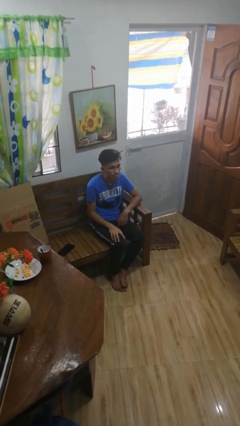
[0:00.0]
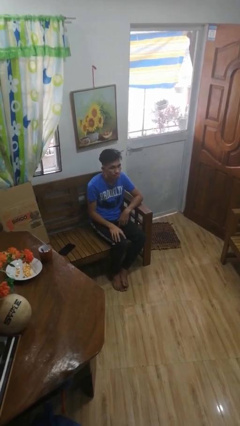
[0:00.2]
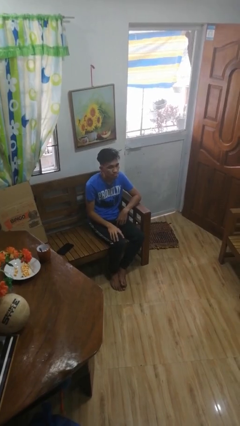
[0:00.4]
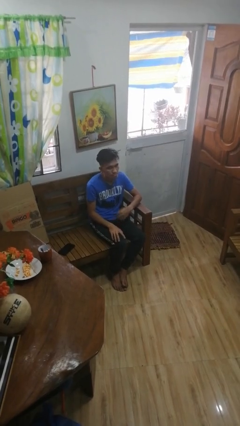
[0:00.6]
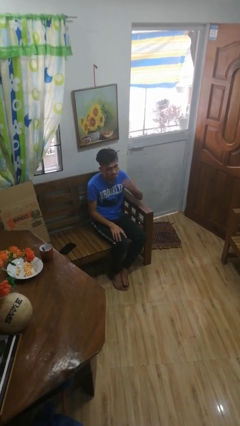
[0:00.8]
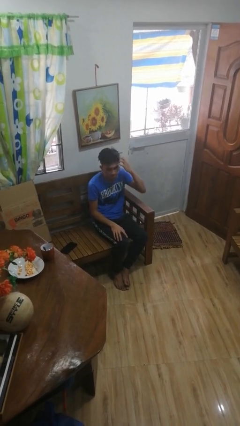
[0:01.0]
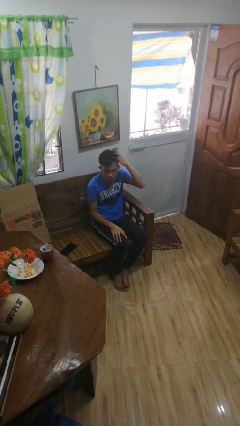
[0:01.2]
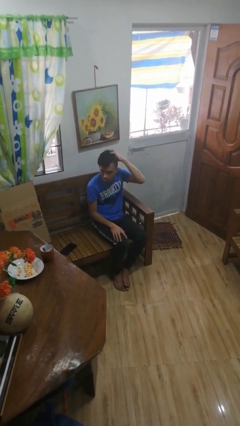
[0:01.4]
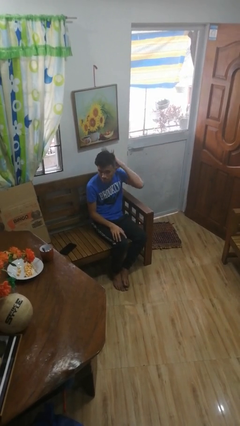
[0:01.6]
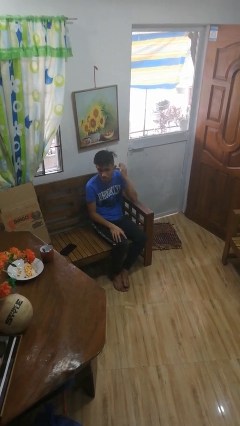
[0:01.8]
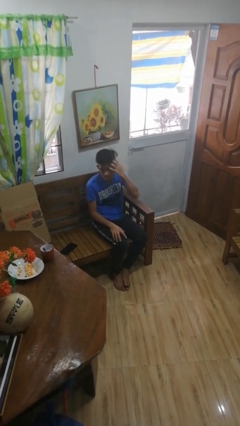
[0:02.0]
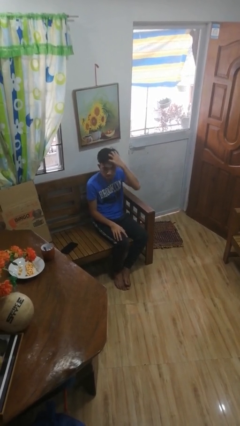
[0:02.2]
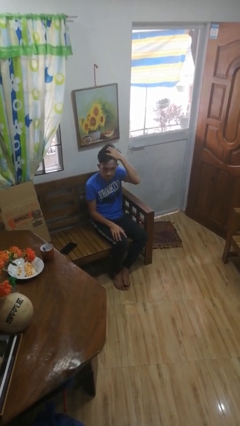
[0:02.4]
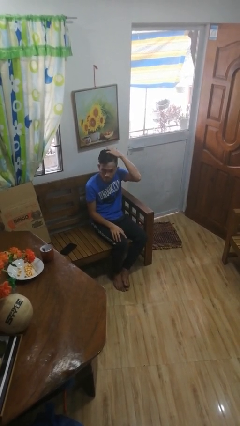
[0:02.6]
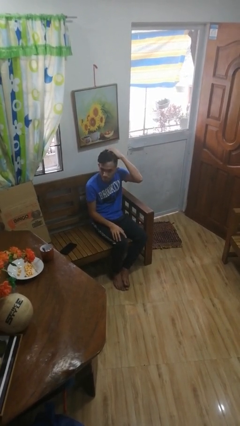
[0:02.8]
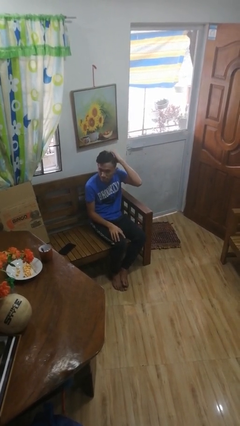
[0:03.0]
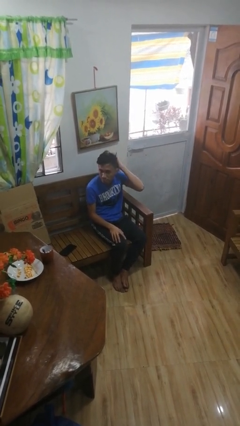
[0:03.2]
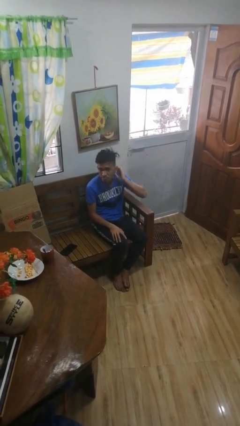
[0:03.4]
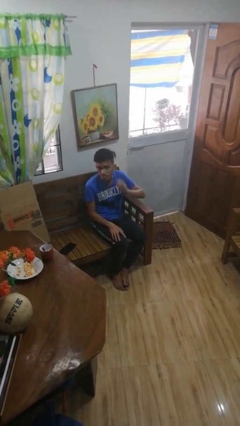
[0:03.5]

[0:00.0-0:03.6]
person strokes hair

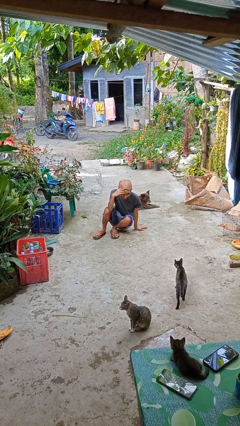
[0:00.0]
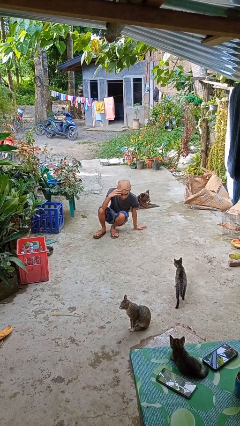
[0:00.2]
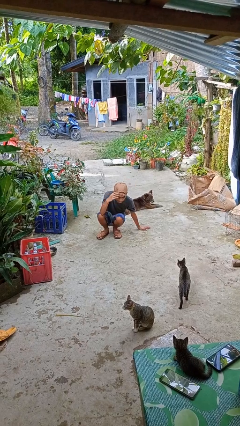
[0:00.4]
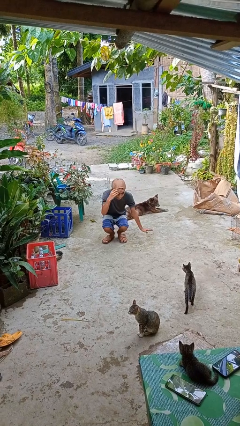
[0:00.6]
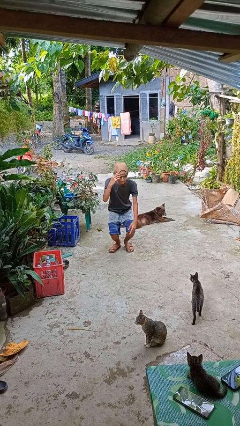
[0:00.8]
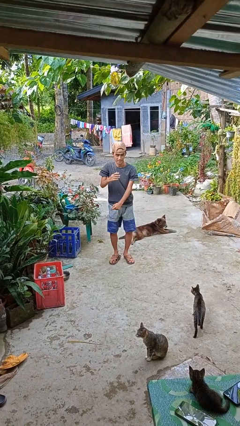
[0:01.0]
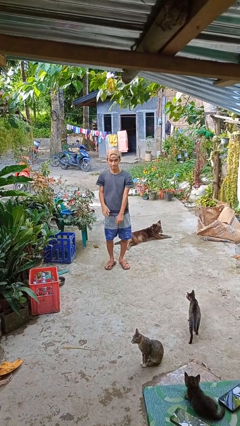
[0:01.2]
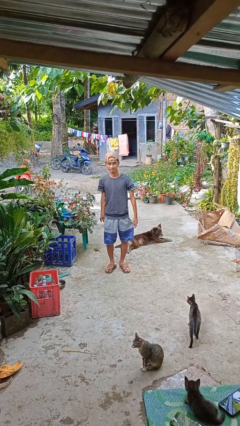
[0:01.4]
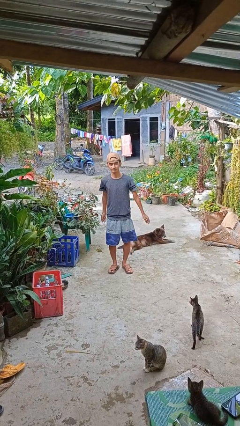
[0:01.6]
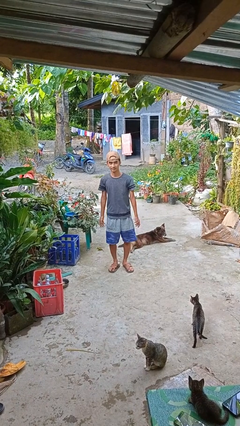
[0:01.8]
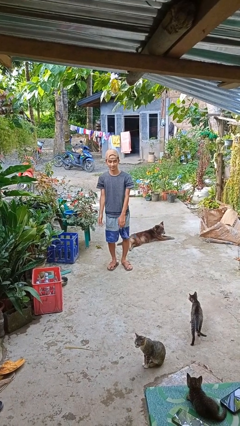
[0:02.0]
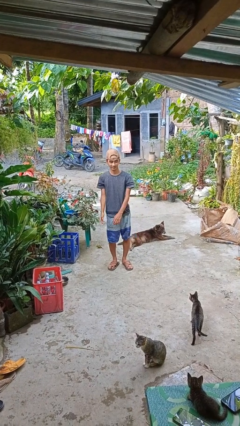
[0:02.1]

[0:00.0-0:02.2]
person stands up from floor

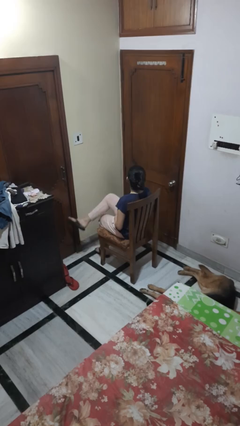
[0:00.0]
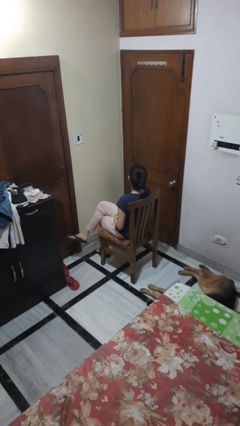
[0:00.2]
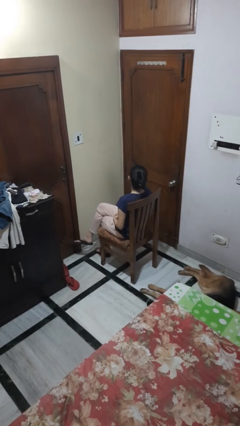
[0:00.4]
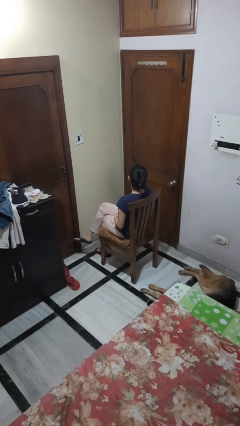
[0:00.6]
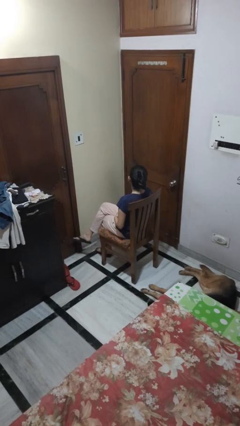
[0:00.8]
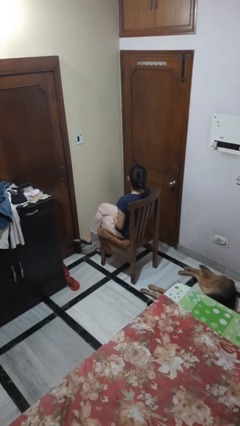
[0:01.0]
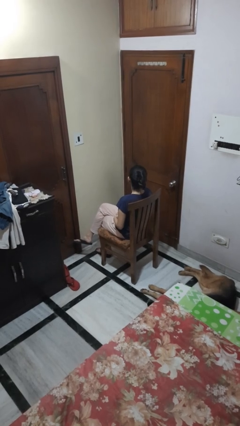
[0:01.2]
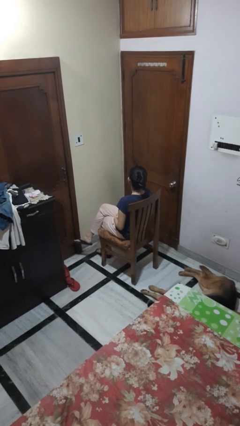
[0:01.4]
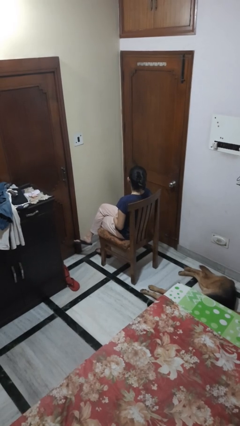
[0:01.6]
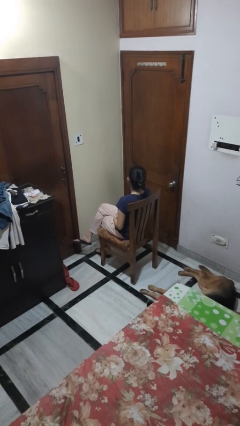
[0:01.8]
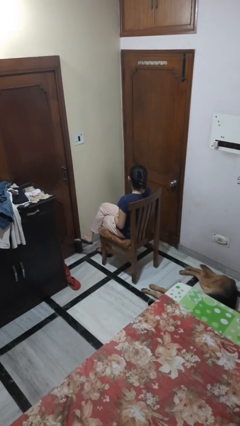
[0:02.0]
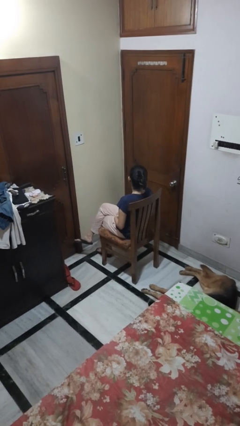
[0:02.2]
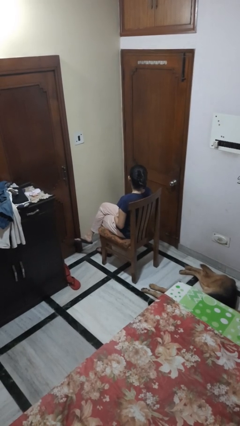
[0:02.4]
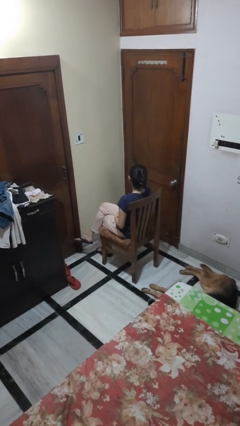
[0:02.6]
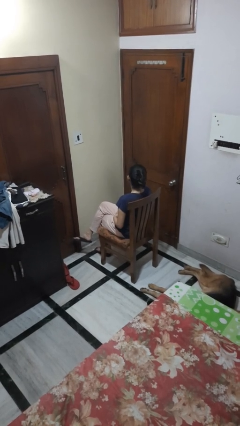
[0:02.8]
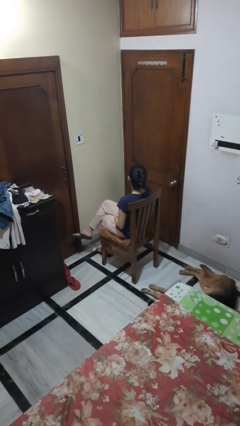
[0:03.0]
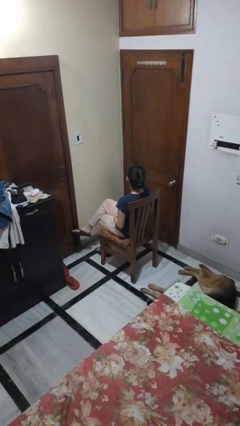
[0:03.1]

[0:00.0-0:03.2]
person crosses legs

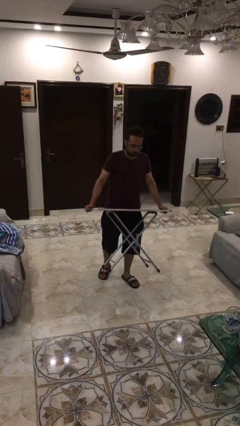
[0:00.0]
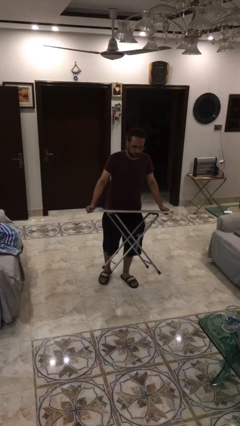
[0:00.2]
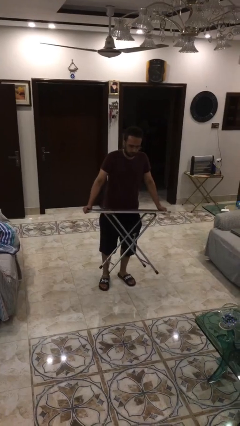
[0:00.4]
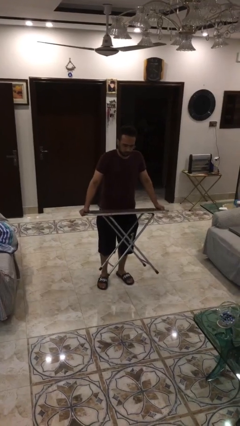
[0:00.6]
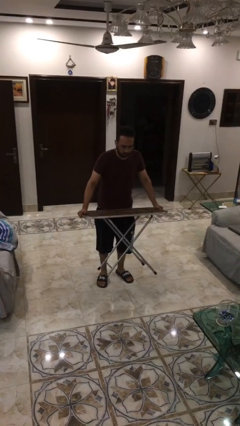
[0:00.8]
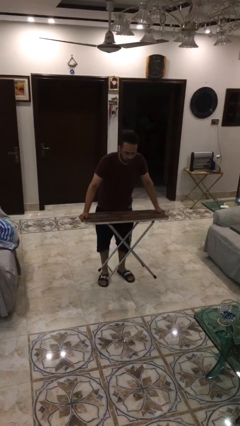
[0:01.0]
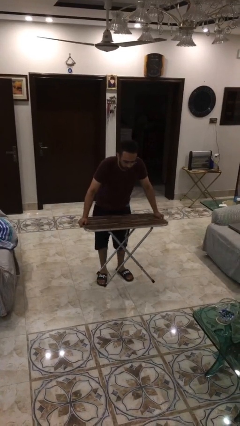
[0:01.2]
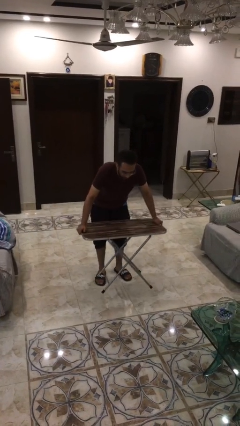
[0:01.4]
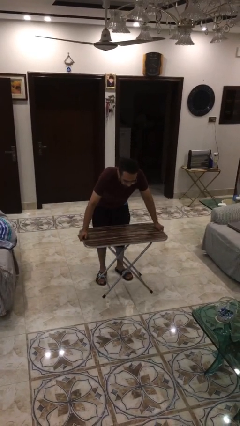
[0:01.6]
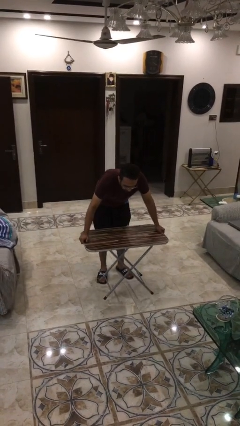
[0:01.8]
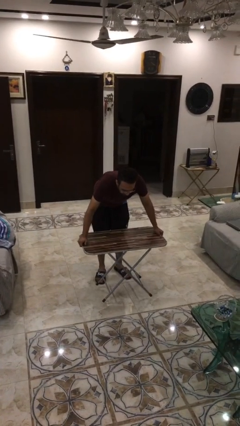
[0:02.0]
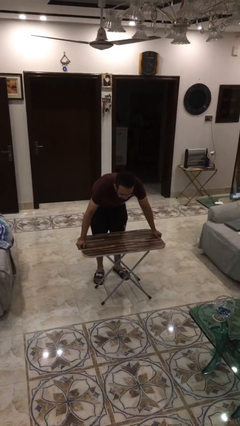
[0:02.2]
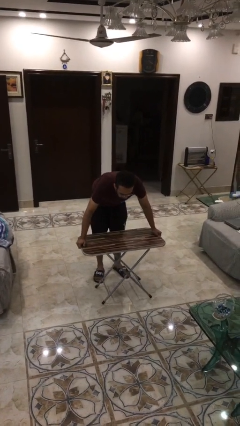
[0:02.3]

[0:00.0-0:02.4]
person puts down object on floor

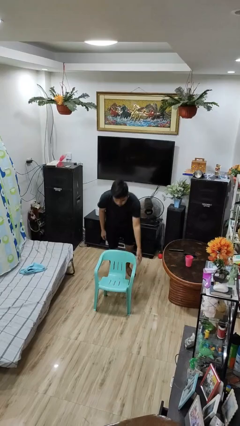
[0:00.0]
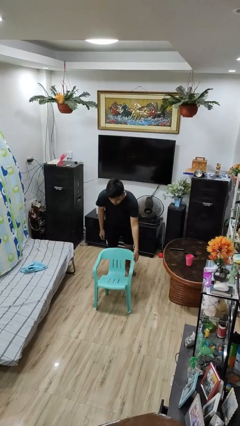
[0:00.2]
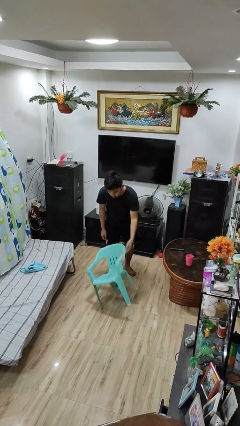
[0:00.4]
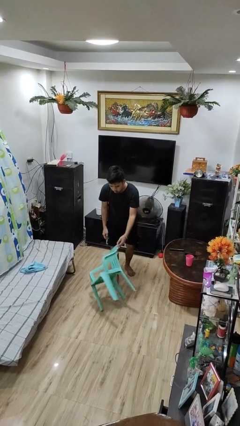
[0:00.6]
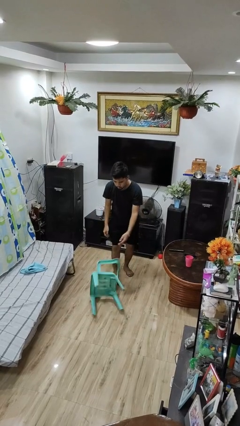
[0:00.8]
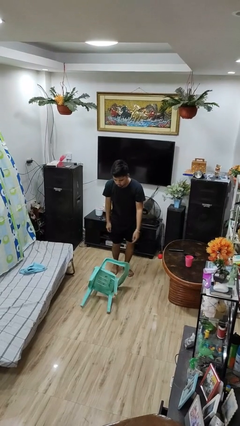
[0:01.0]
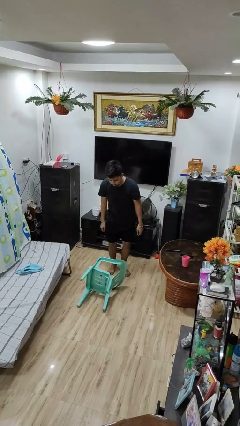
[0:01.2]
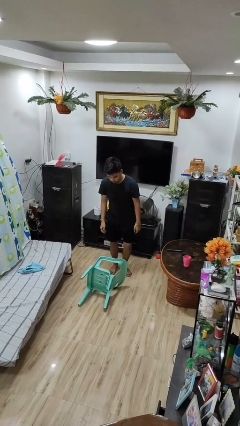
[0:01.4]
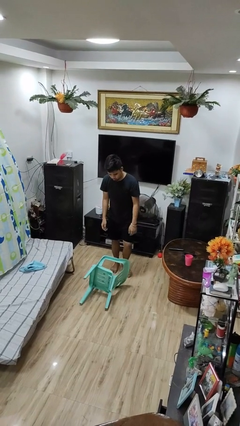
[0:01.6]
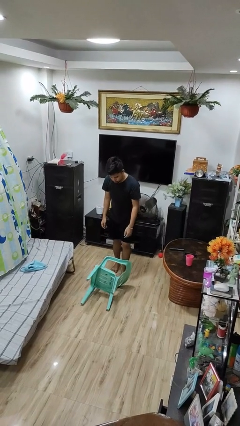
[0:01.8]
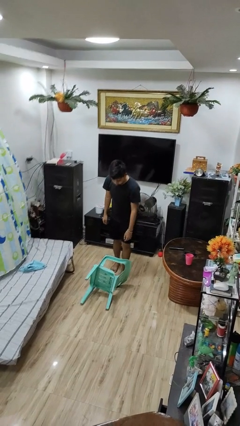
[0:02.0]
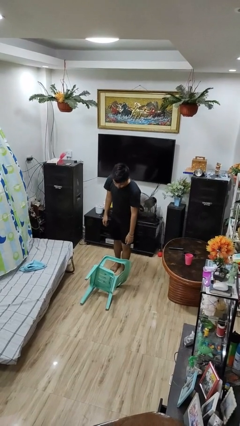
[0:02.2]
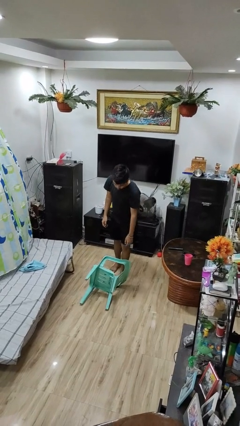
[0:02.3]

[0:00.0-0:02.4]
person knocks over furniture

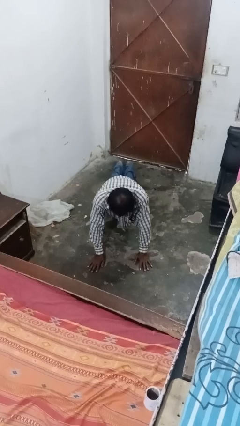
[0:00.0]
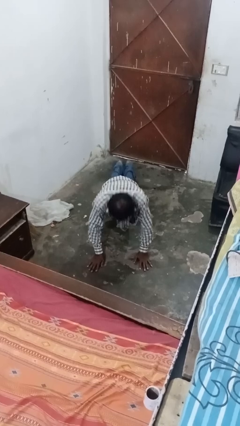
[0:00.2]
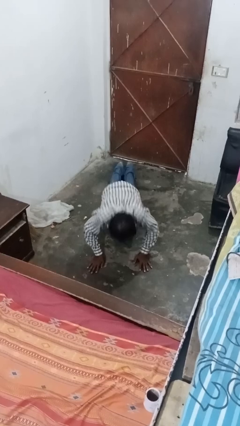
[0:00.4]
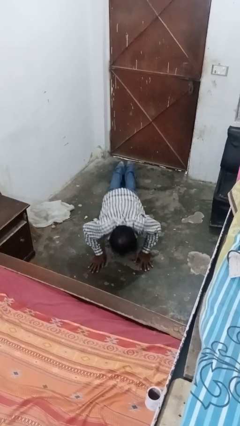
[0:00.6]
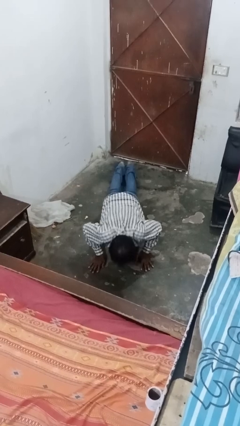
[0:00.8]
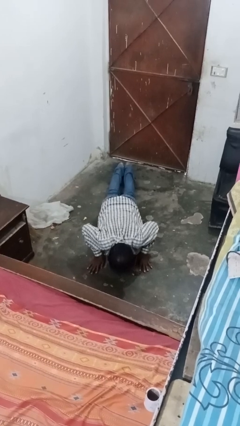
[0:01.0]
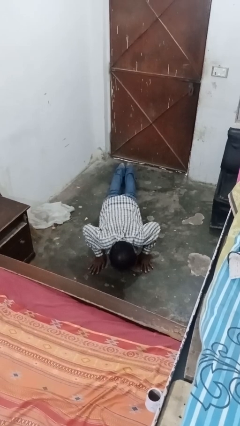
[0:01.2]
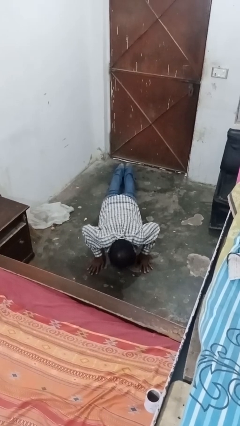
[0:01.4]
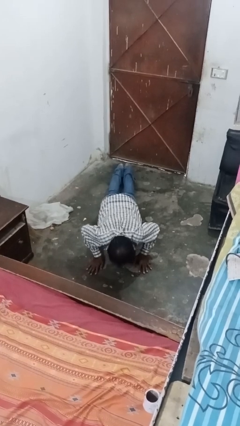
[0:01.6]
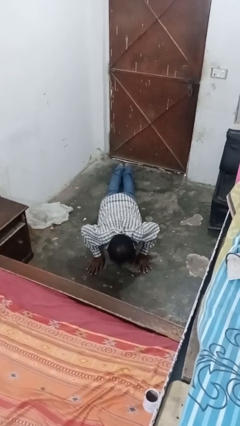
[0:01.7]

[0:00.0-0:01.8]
person exercises with pushup

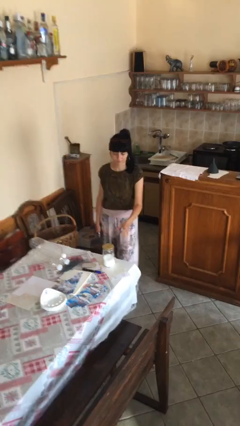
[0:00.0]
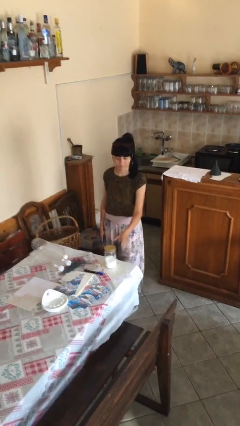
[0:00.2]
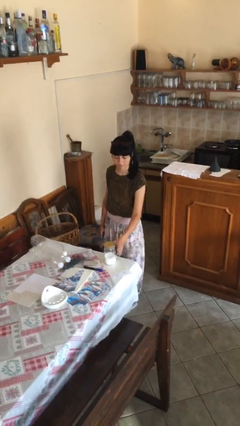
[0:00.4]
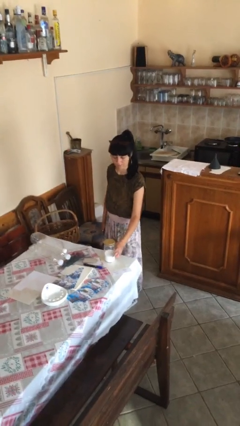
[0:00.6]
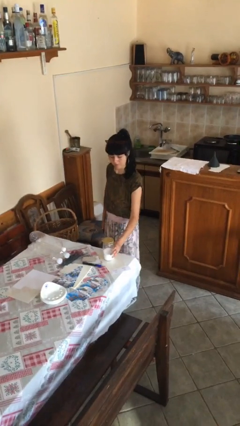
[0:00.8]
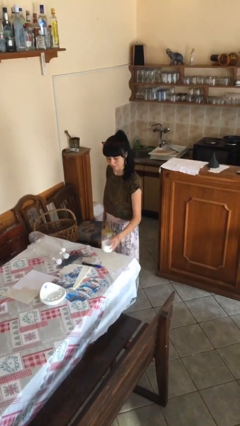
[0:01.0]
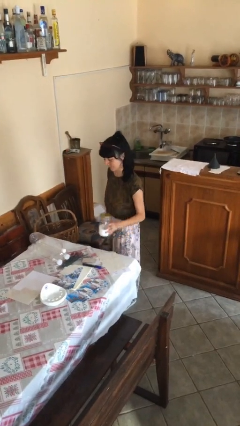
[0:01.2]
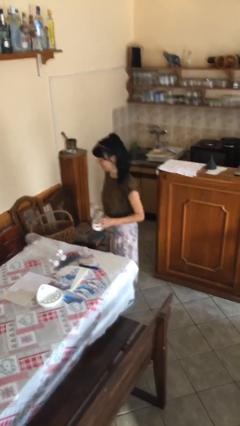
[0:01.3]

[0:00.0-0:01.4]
person picks up object from table

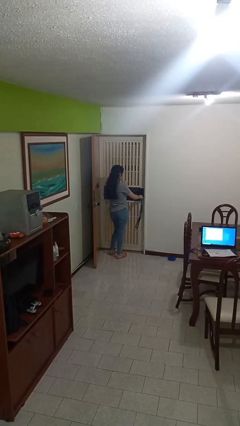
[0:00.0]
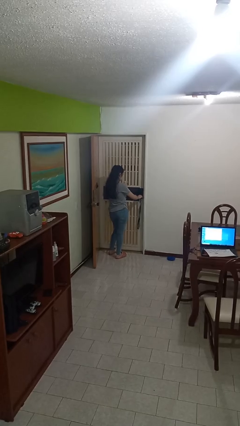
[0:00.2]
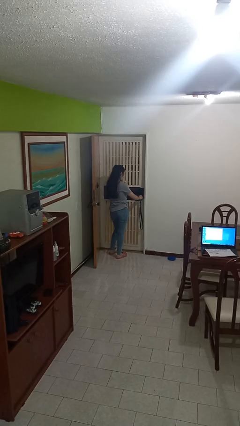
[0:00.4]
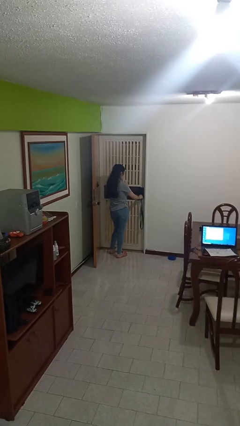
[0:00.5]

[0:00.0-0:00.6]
person unlocks door with keys
